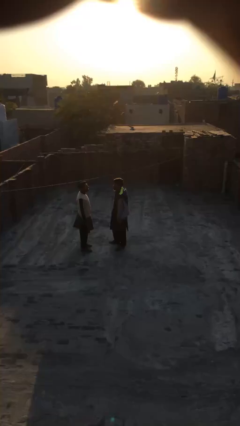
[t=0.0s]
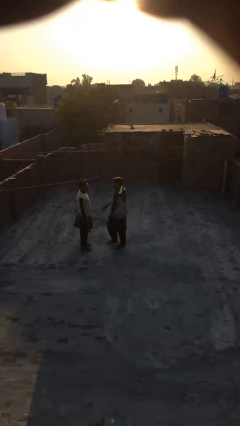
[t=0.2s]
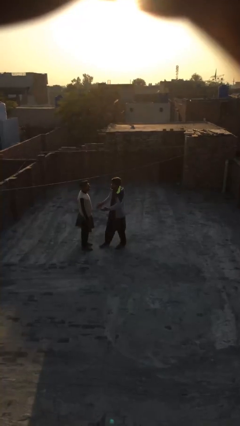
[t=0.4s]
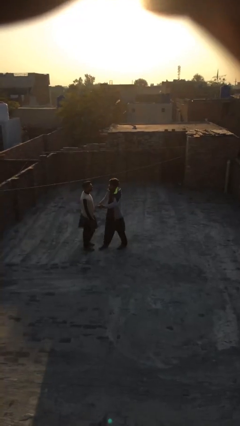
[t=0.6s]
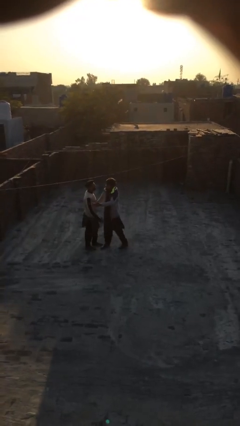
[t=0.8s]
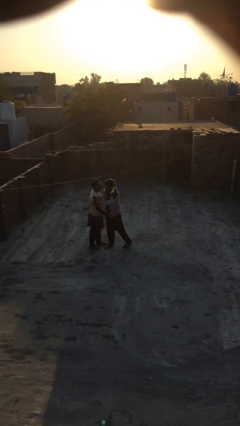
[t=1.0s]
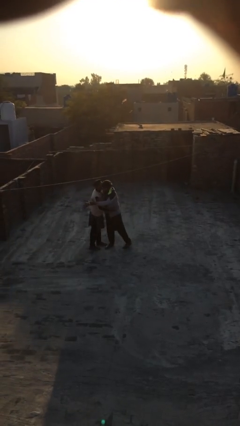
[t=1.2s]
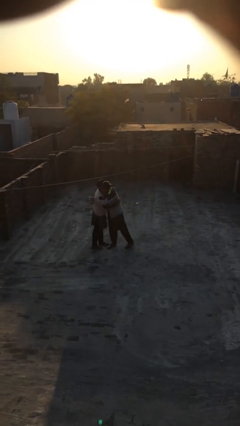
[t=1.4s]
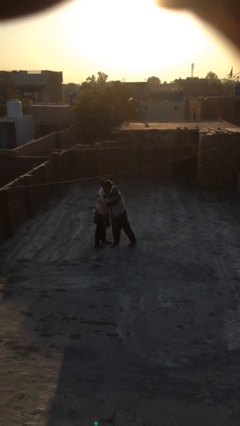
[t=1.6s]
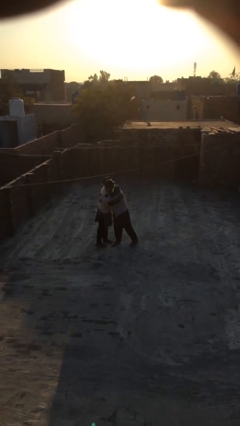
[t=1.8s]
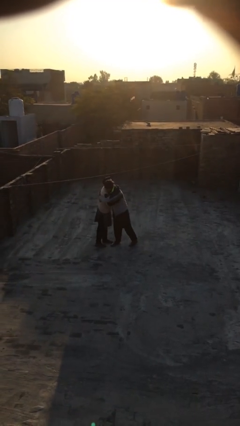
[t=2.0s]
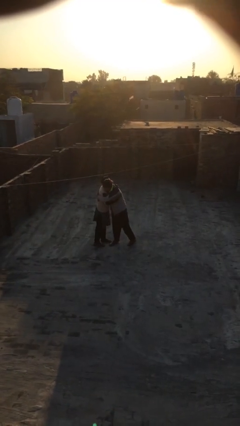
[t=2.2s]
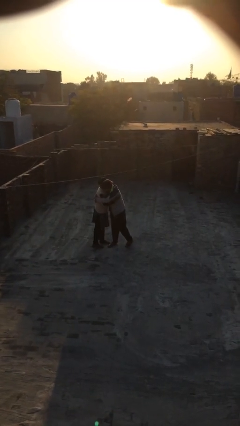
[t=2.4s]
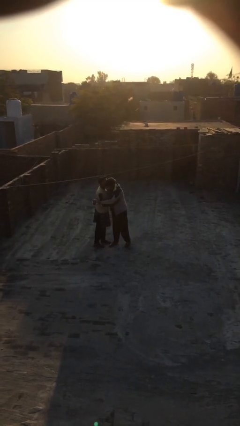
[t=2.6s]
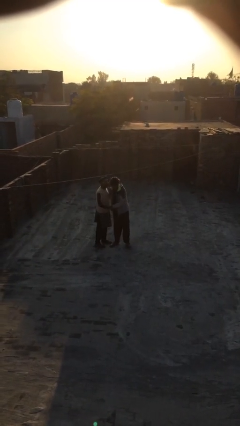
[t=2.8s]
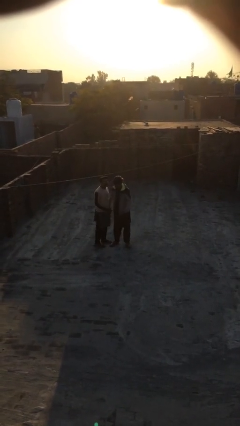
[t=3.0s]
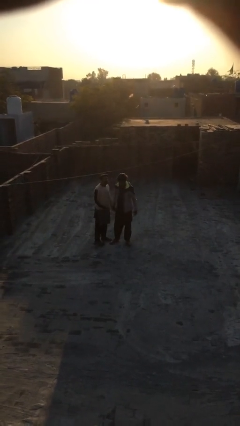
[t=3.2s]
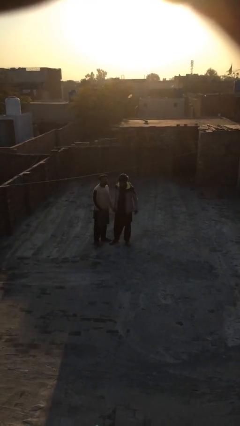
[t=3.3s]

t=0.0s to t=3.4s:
person embraces person

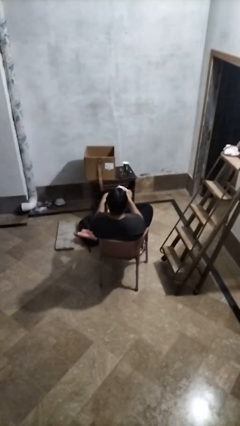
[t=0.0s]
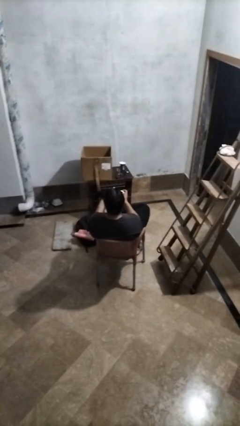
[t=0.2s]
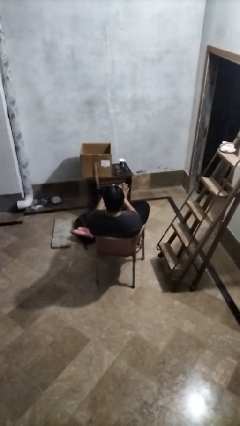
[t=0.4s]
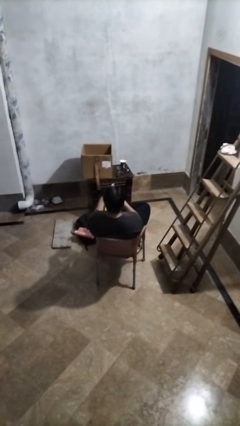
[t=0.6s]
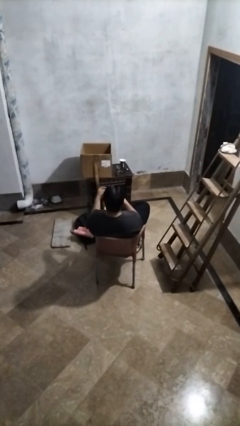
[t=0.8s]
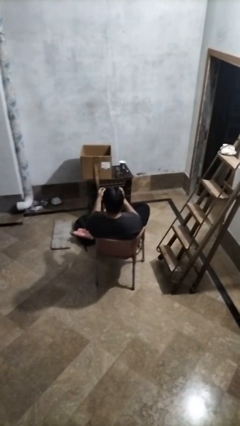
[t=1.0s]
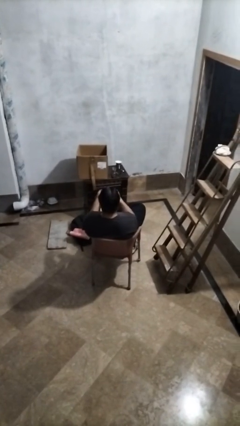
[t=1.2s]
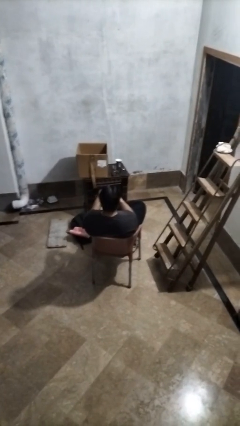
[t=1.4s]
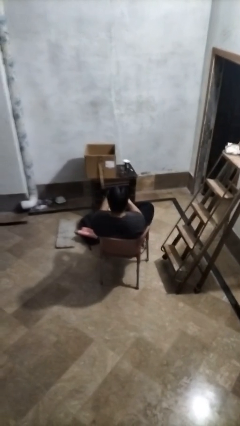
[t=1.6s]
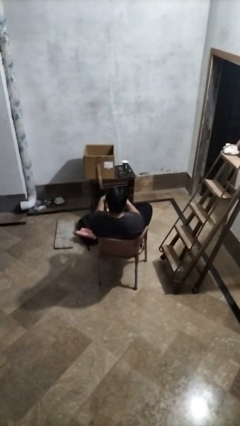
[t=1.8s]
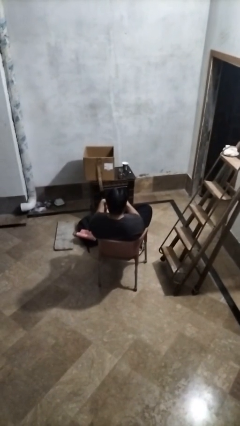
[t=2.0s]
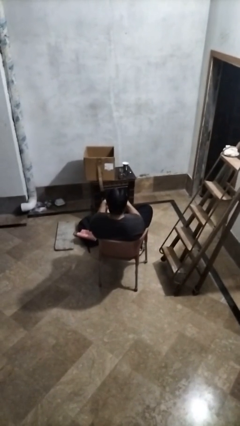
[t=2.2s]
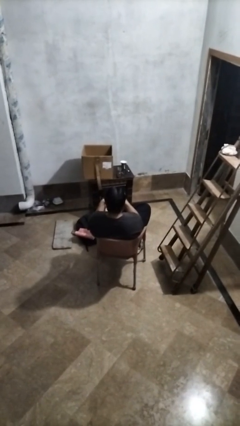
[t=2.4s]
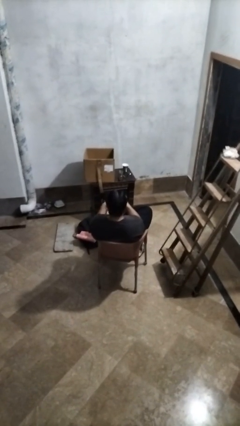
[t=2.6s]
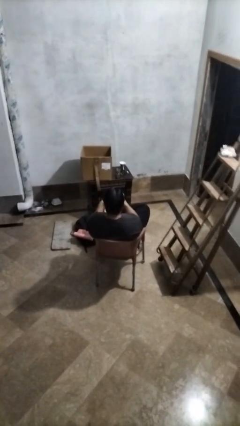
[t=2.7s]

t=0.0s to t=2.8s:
person crumples paper

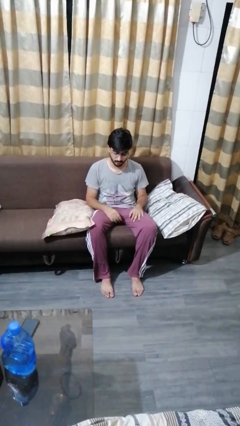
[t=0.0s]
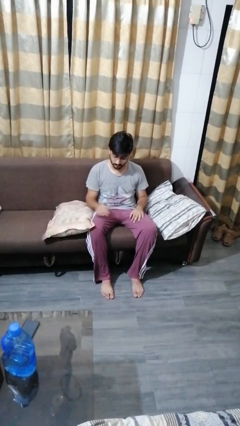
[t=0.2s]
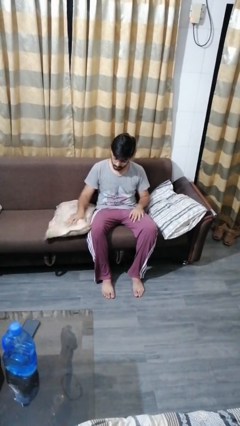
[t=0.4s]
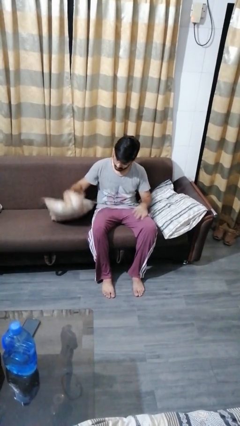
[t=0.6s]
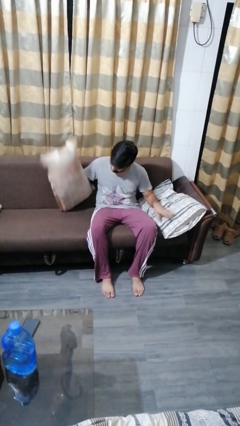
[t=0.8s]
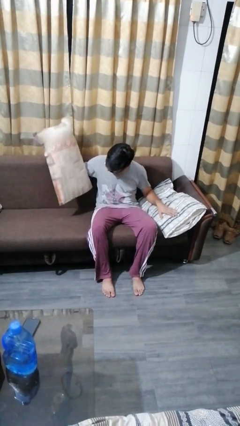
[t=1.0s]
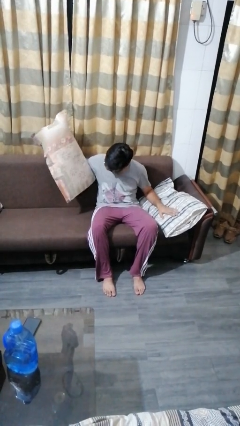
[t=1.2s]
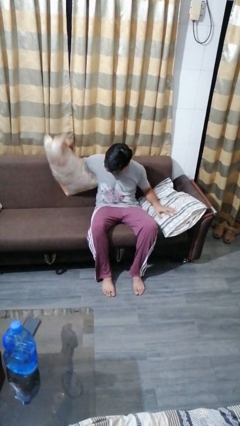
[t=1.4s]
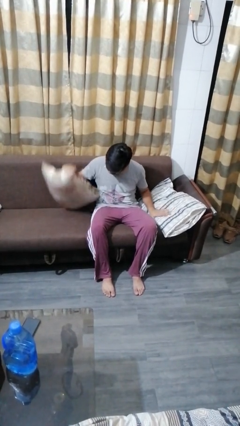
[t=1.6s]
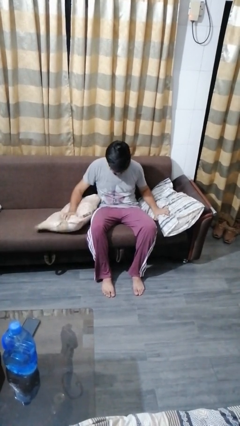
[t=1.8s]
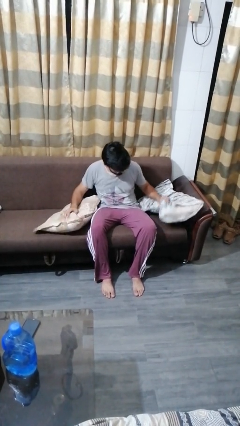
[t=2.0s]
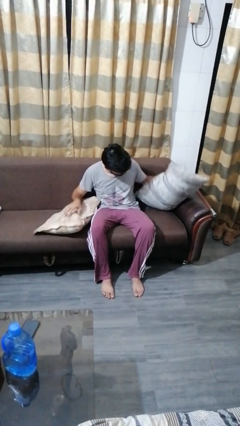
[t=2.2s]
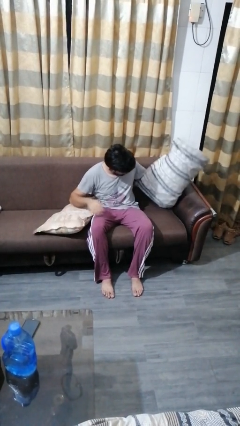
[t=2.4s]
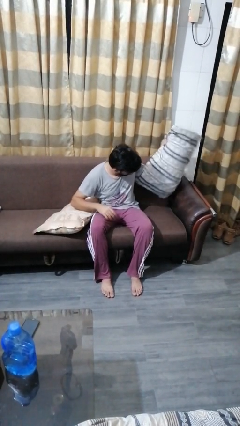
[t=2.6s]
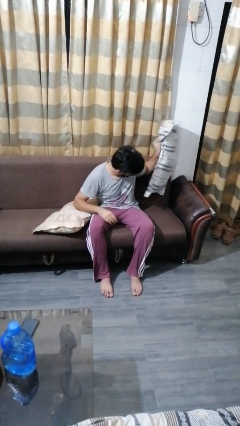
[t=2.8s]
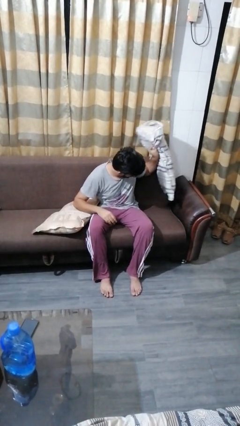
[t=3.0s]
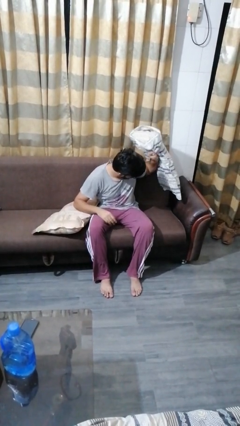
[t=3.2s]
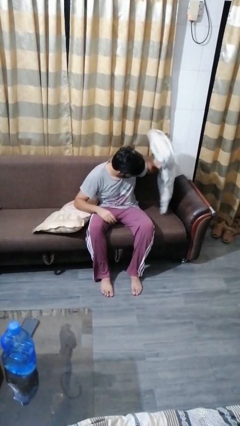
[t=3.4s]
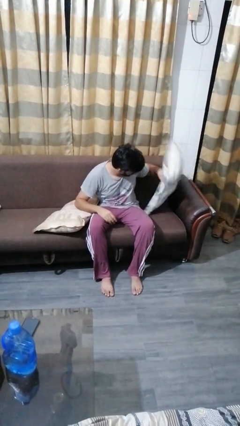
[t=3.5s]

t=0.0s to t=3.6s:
person searches in couch

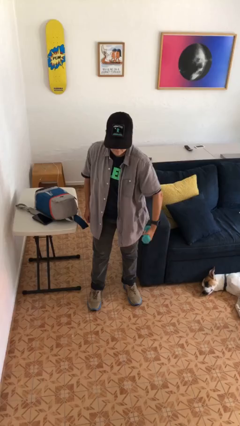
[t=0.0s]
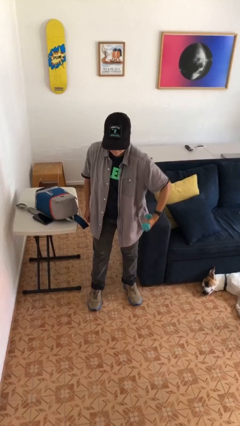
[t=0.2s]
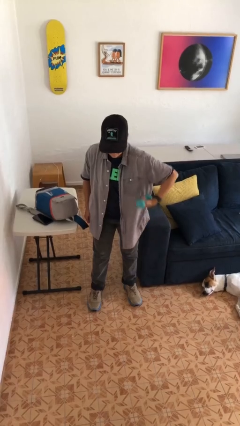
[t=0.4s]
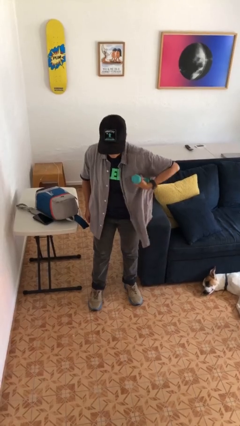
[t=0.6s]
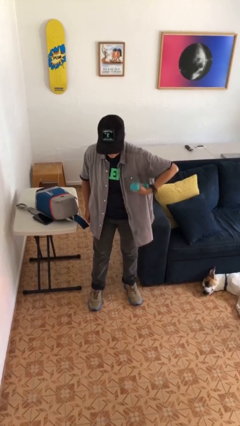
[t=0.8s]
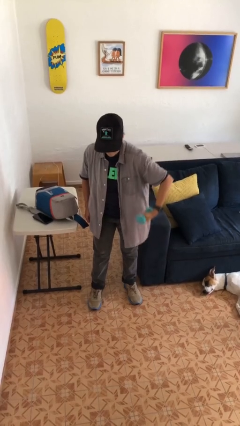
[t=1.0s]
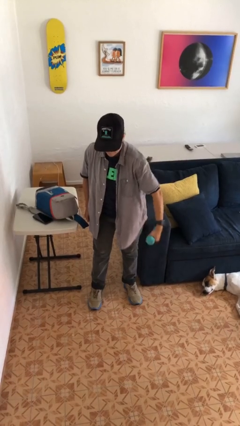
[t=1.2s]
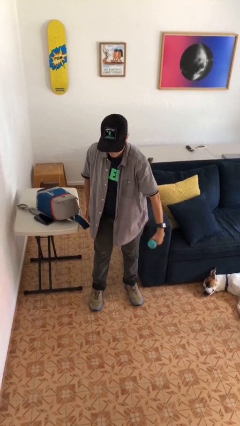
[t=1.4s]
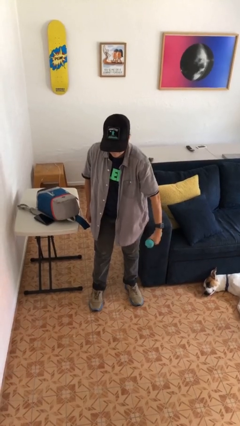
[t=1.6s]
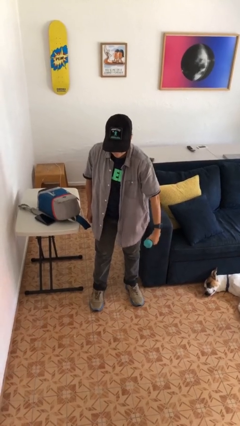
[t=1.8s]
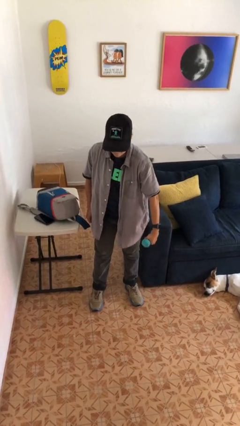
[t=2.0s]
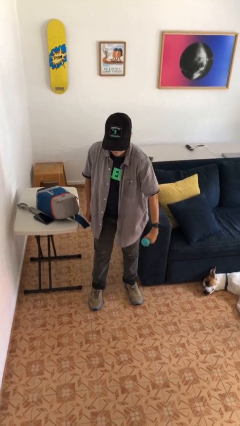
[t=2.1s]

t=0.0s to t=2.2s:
person lifts dumbbells

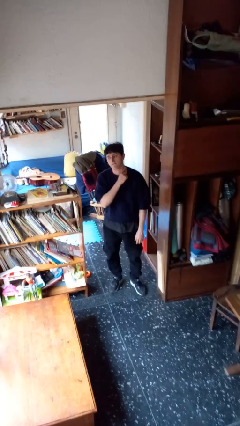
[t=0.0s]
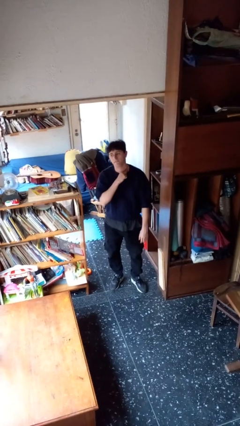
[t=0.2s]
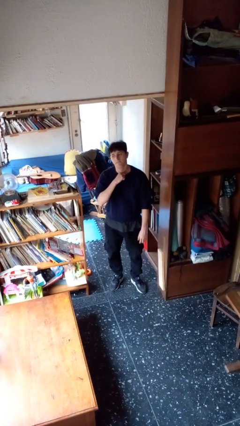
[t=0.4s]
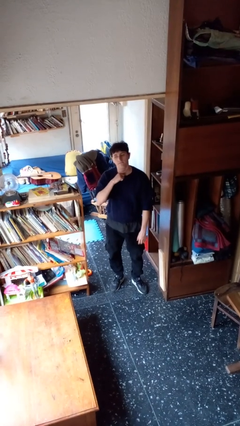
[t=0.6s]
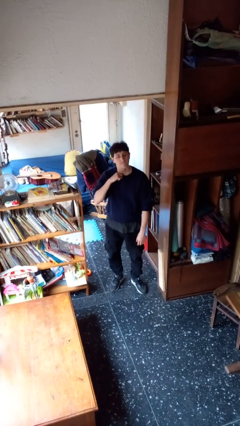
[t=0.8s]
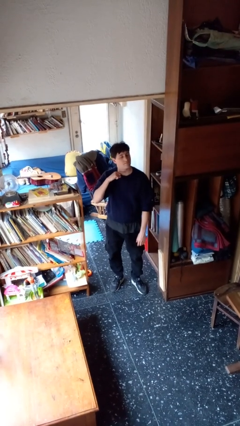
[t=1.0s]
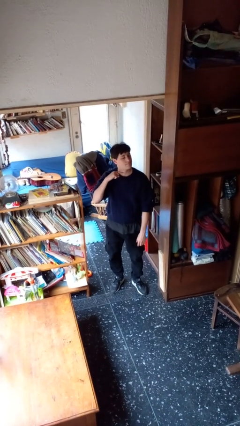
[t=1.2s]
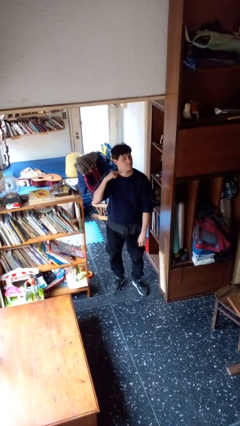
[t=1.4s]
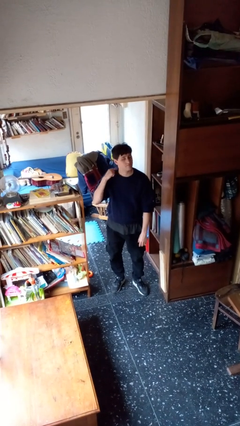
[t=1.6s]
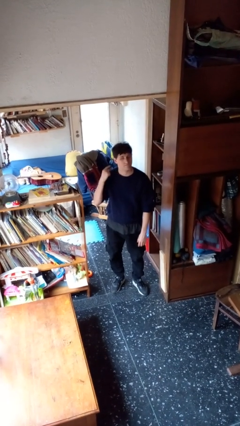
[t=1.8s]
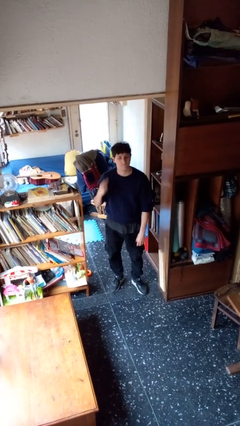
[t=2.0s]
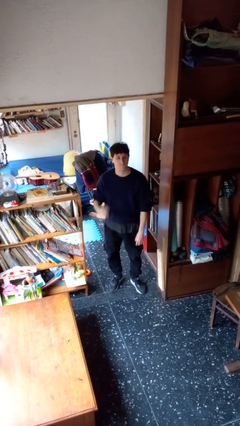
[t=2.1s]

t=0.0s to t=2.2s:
person gestures cut

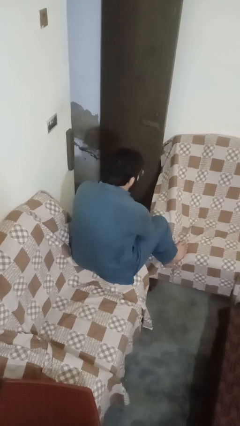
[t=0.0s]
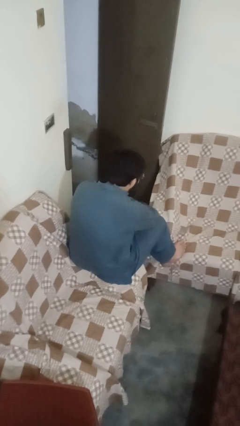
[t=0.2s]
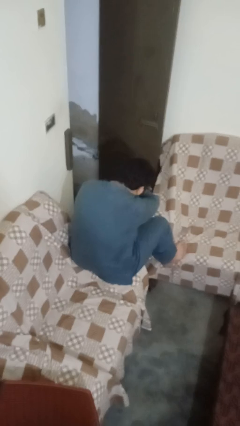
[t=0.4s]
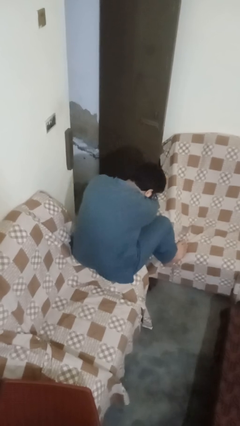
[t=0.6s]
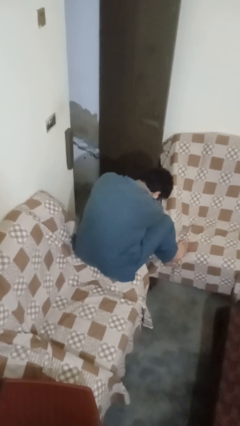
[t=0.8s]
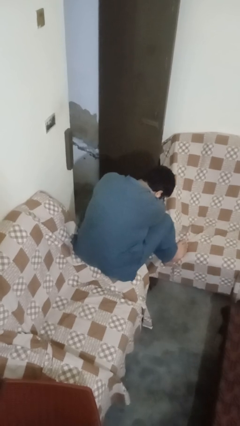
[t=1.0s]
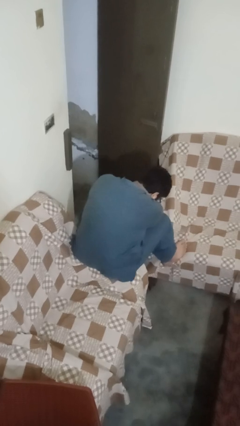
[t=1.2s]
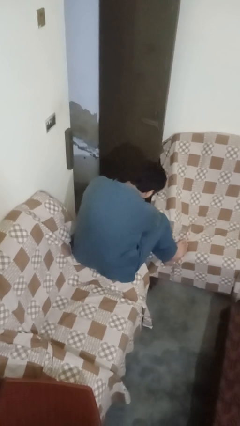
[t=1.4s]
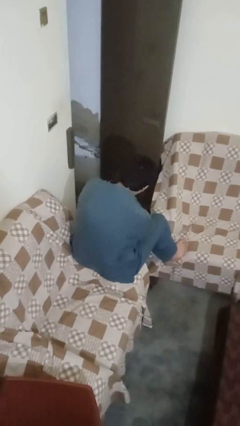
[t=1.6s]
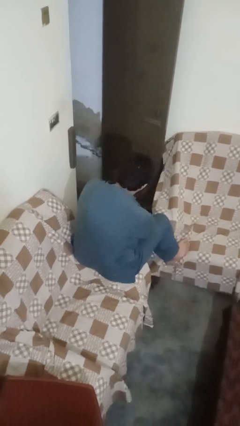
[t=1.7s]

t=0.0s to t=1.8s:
person sneezes into arm

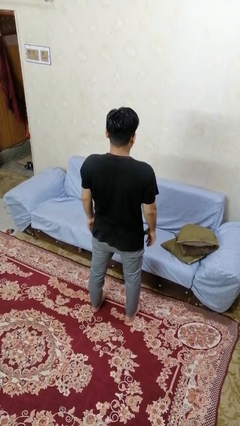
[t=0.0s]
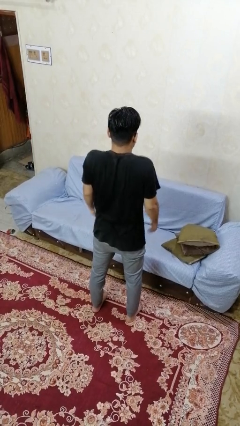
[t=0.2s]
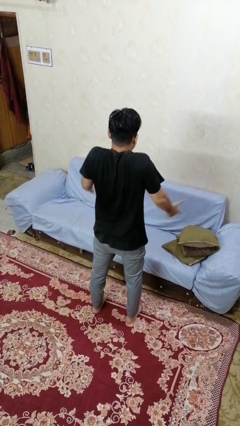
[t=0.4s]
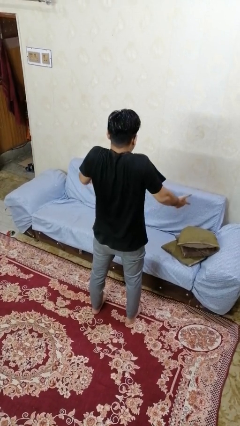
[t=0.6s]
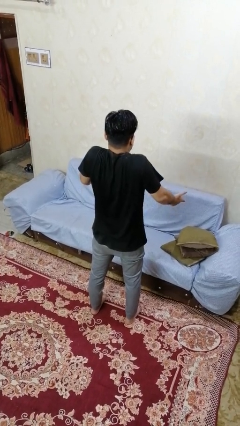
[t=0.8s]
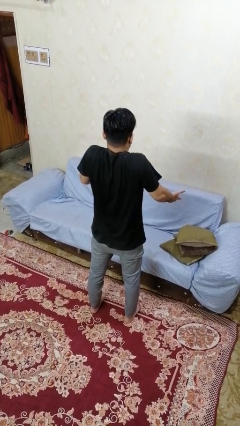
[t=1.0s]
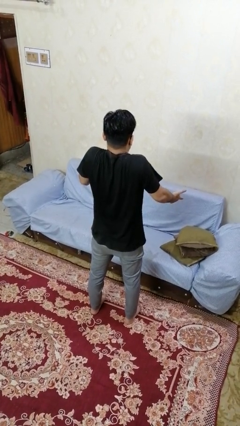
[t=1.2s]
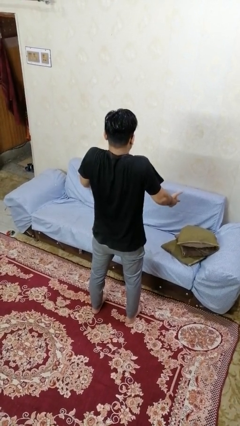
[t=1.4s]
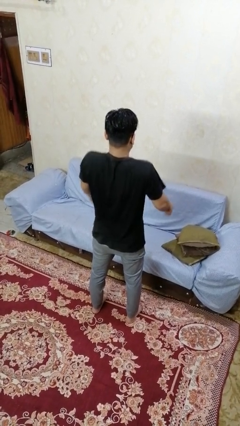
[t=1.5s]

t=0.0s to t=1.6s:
person shrugs
